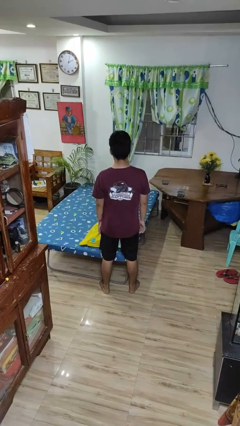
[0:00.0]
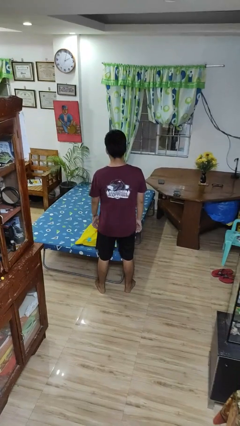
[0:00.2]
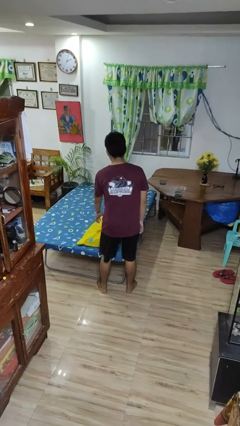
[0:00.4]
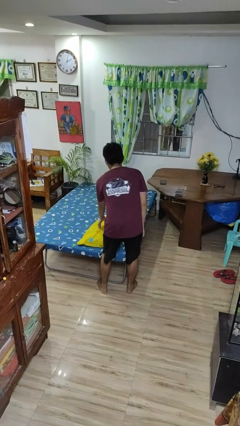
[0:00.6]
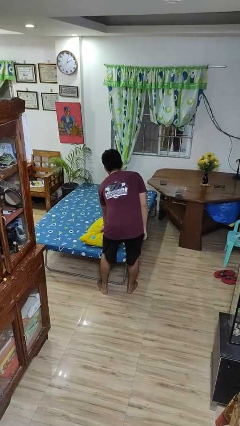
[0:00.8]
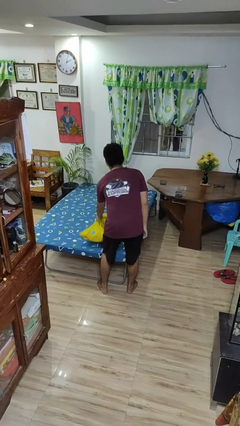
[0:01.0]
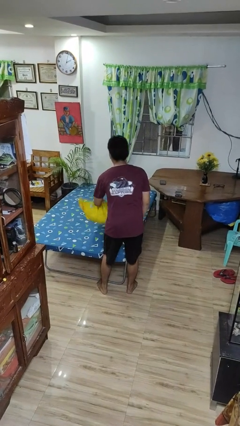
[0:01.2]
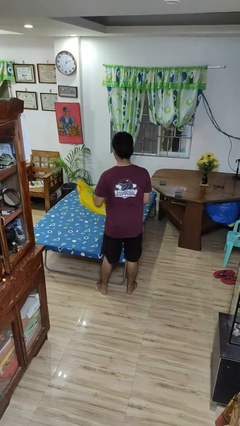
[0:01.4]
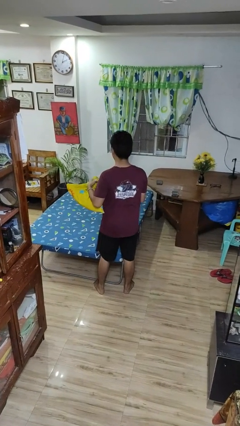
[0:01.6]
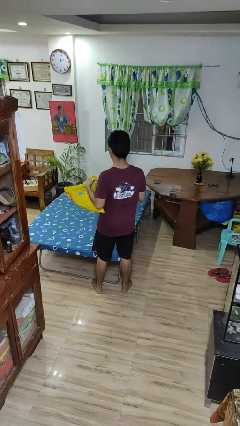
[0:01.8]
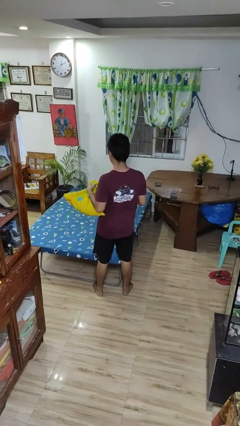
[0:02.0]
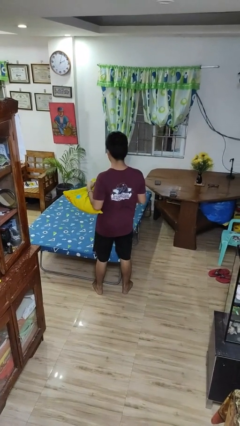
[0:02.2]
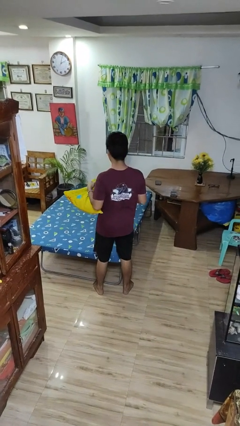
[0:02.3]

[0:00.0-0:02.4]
person picks up object from bed

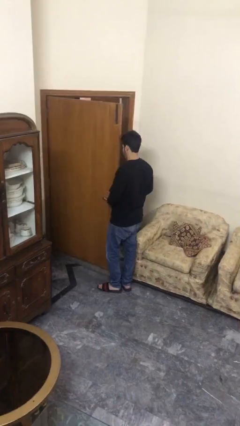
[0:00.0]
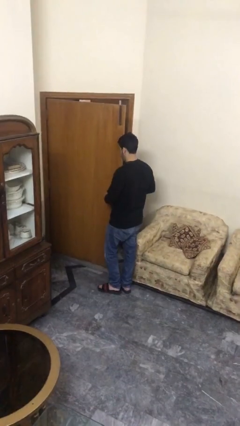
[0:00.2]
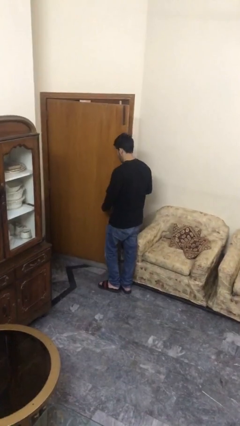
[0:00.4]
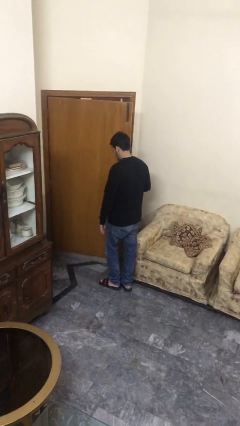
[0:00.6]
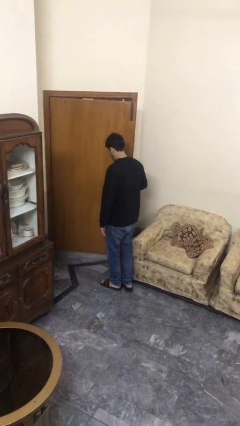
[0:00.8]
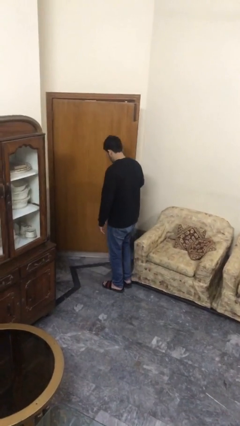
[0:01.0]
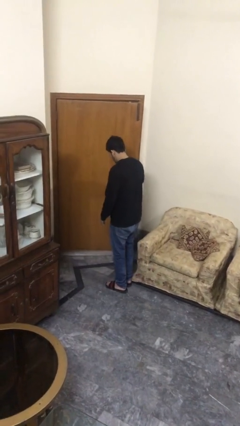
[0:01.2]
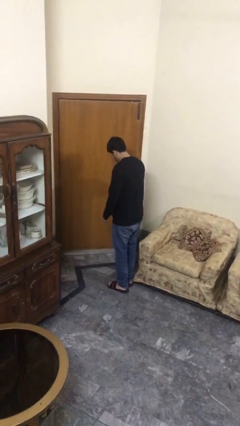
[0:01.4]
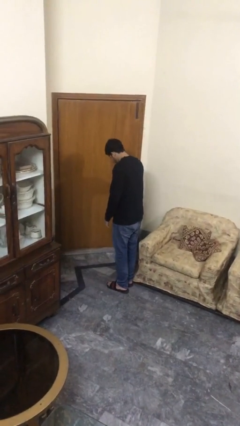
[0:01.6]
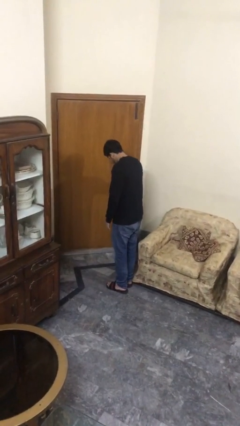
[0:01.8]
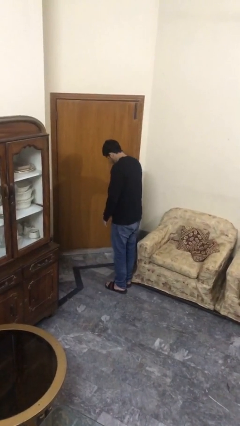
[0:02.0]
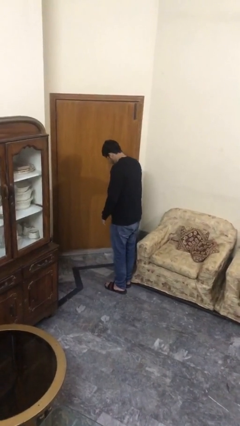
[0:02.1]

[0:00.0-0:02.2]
person closes facility door

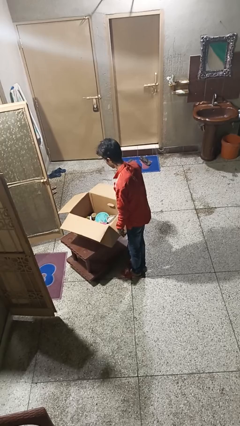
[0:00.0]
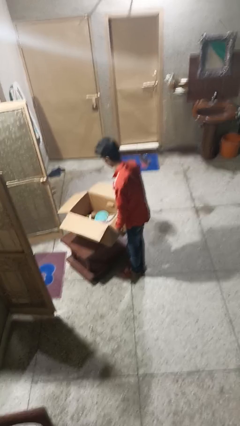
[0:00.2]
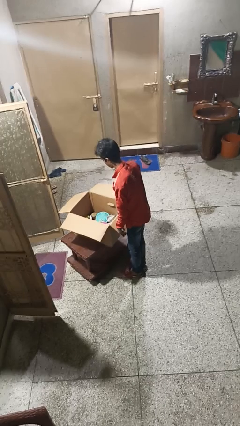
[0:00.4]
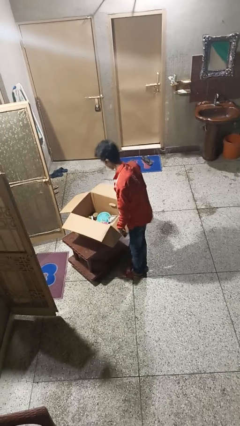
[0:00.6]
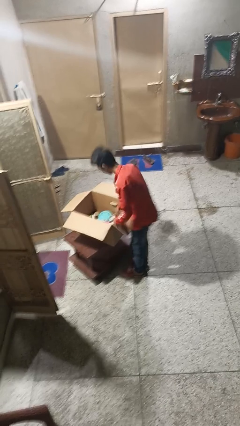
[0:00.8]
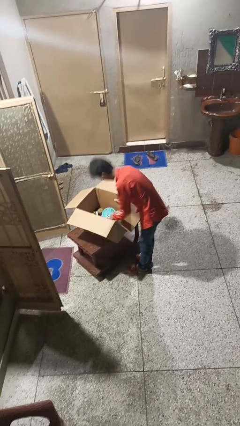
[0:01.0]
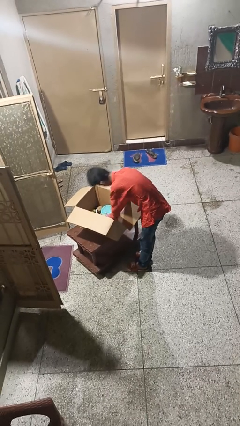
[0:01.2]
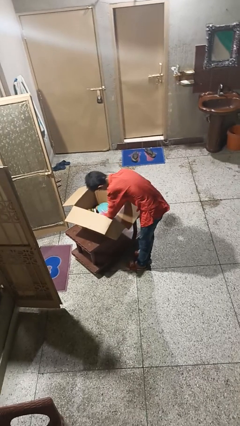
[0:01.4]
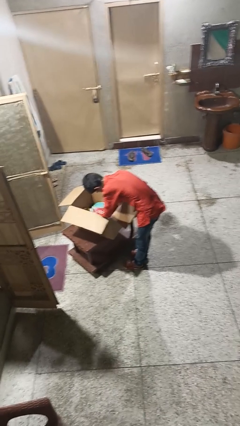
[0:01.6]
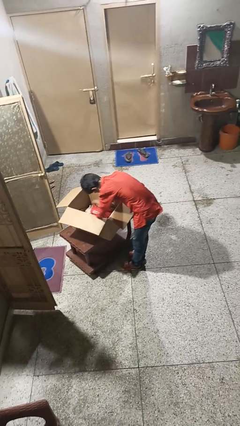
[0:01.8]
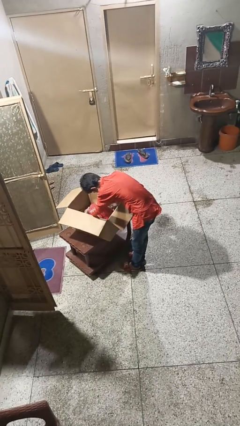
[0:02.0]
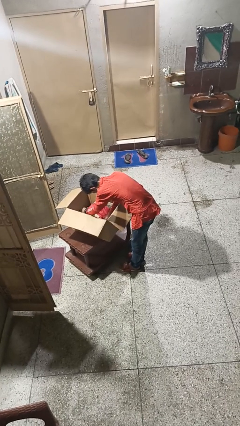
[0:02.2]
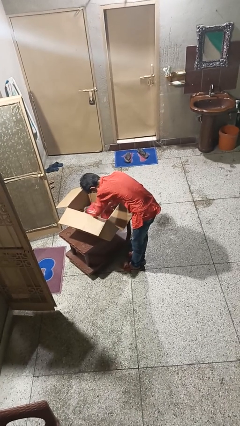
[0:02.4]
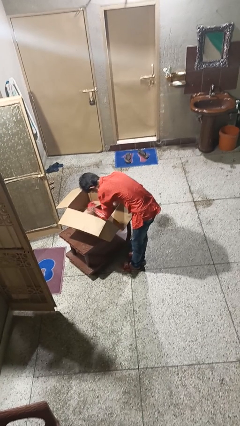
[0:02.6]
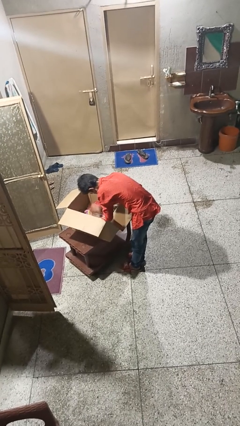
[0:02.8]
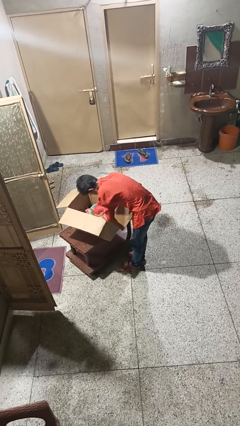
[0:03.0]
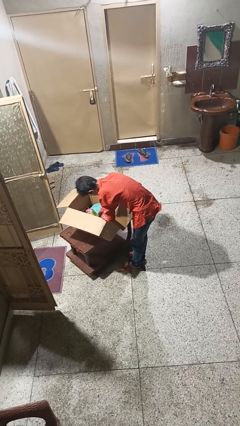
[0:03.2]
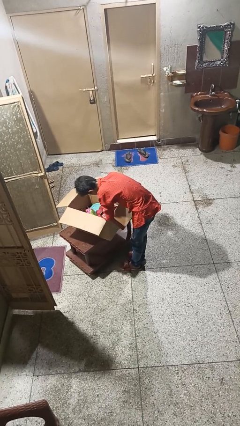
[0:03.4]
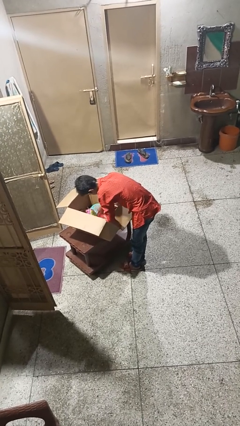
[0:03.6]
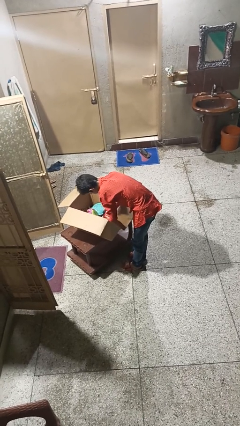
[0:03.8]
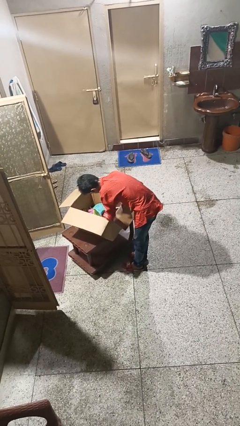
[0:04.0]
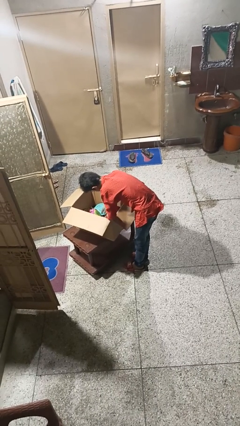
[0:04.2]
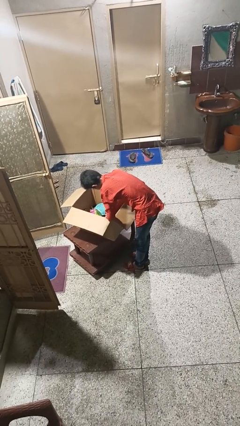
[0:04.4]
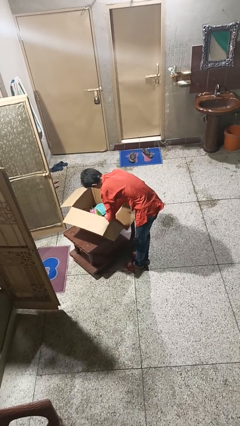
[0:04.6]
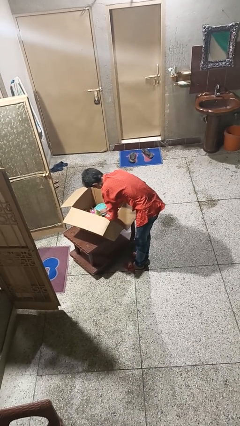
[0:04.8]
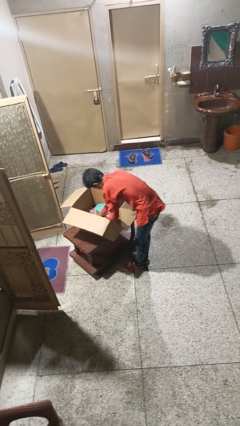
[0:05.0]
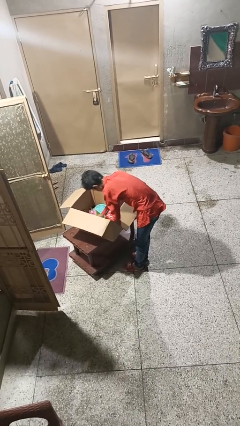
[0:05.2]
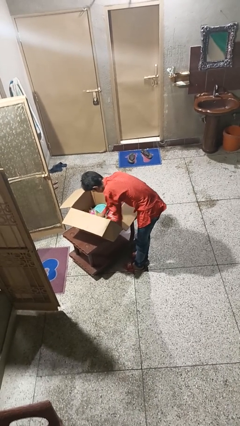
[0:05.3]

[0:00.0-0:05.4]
person searches in box

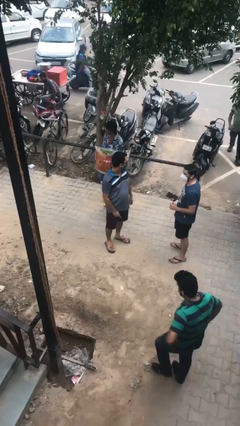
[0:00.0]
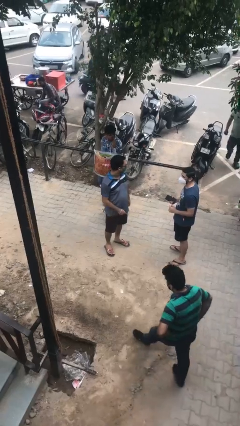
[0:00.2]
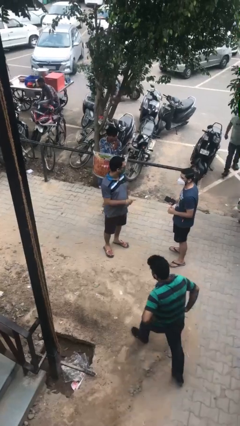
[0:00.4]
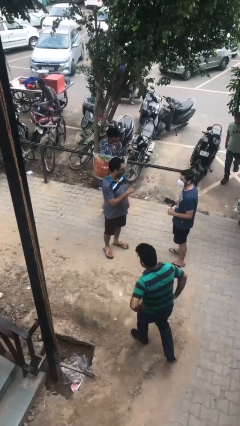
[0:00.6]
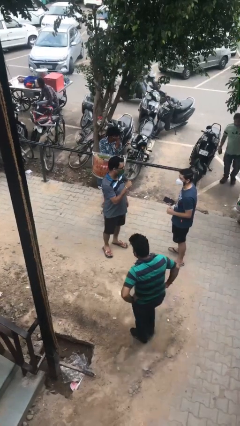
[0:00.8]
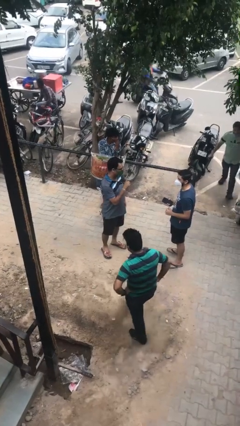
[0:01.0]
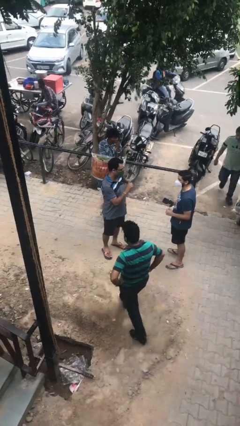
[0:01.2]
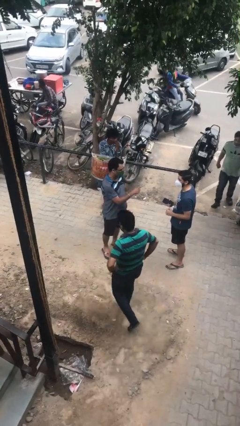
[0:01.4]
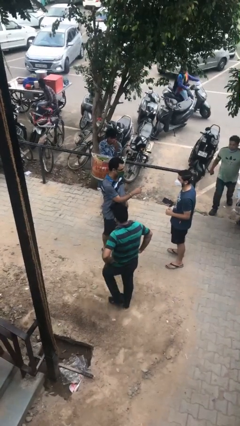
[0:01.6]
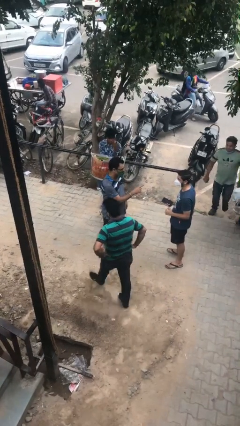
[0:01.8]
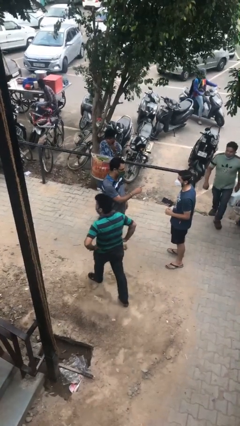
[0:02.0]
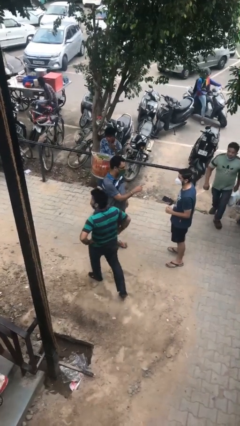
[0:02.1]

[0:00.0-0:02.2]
person points at person

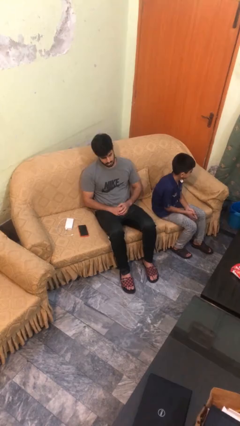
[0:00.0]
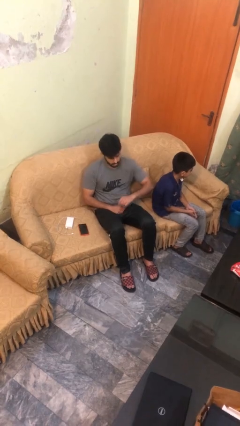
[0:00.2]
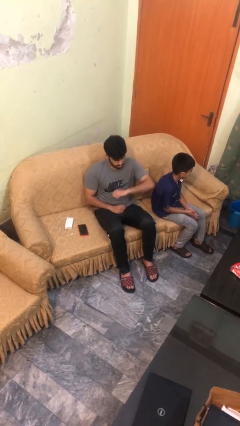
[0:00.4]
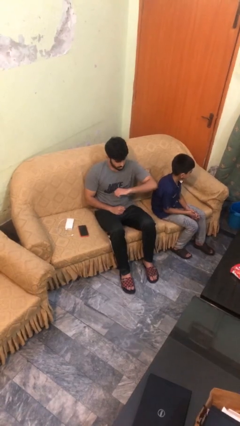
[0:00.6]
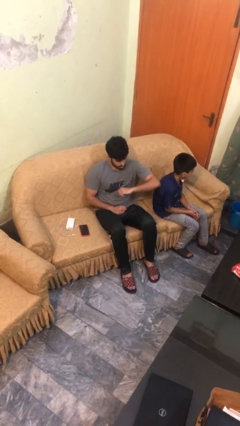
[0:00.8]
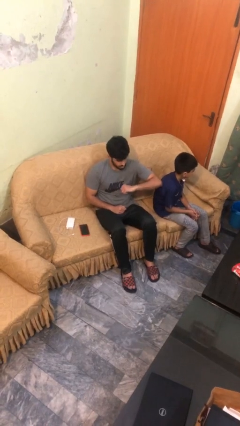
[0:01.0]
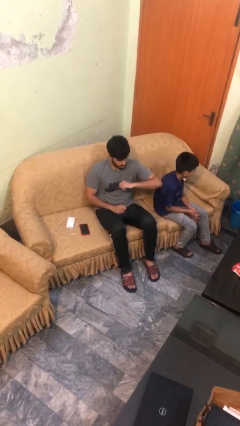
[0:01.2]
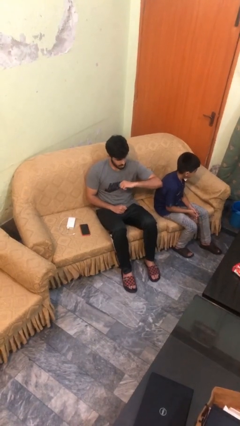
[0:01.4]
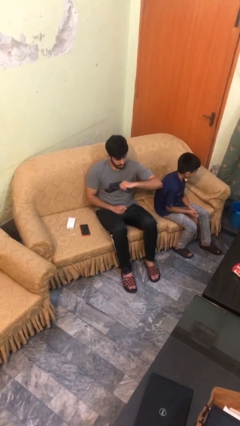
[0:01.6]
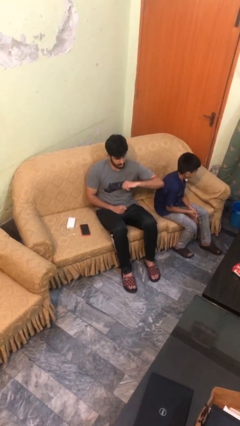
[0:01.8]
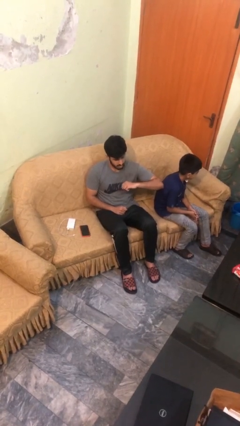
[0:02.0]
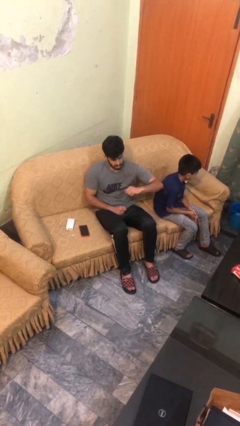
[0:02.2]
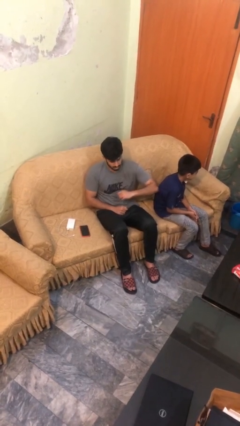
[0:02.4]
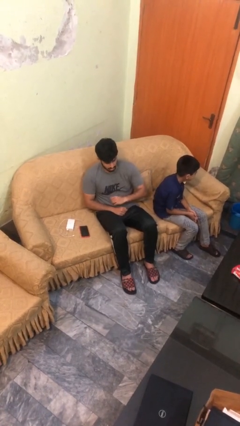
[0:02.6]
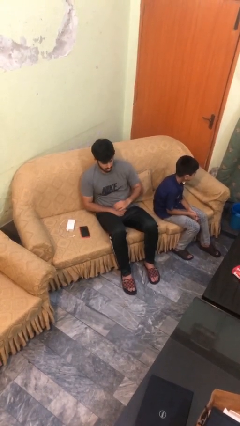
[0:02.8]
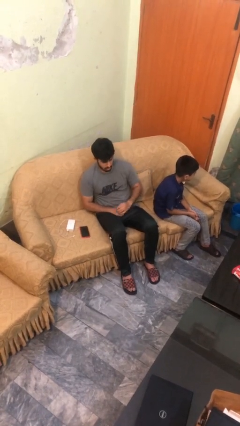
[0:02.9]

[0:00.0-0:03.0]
person nudges person with elbow

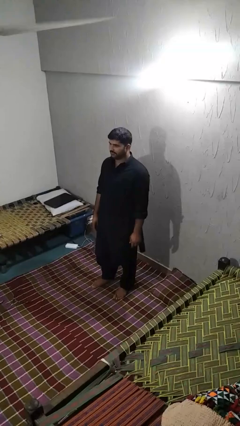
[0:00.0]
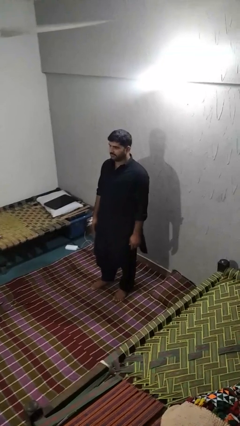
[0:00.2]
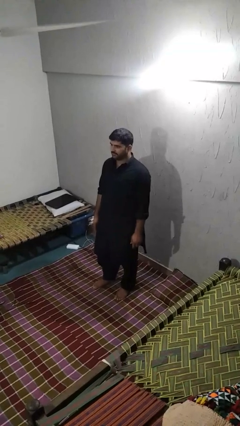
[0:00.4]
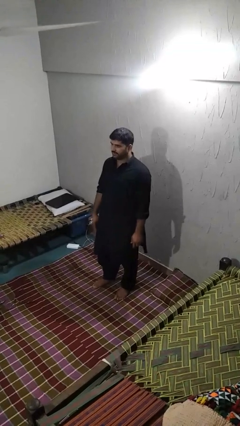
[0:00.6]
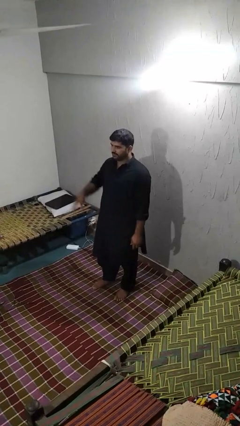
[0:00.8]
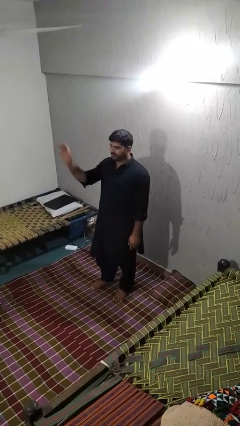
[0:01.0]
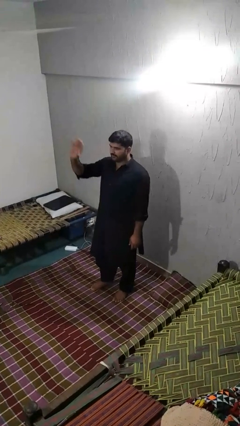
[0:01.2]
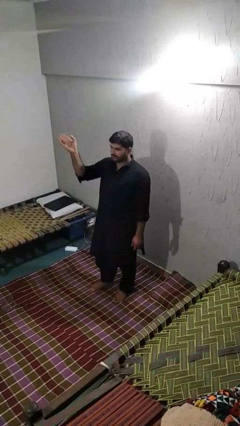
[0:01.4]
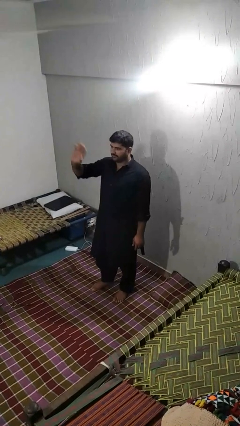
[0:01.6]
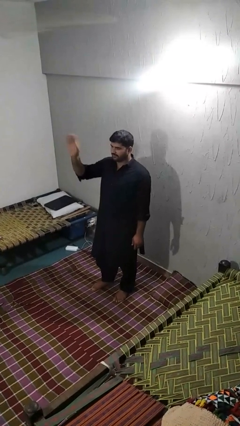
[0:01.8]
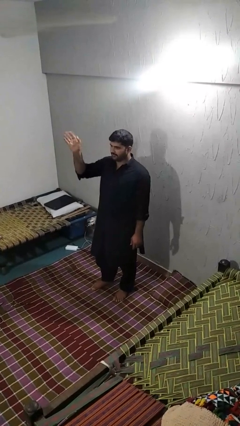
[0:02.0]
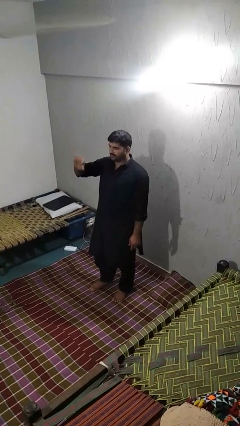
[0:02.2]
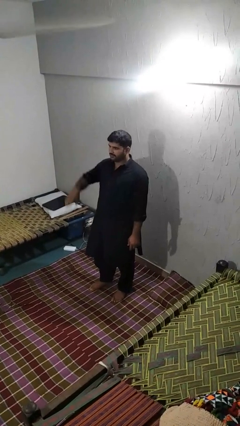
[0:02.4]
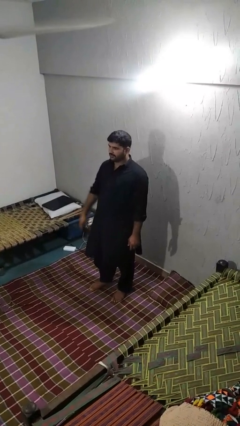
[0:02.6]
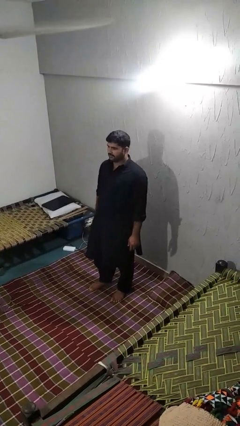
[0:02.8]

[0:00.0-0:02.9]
person waves at person
